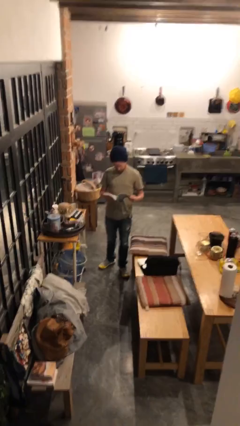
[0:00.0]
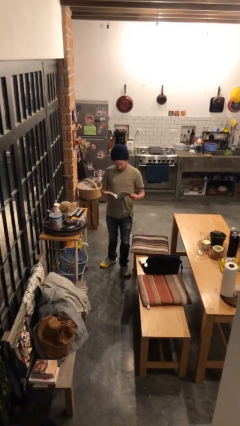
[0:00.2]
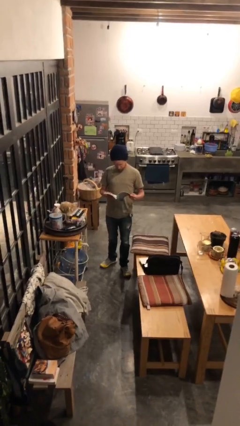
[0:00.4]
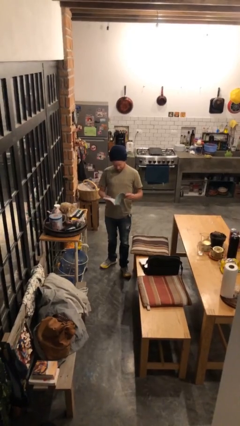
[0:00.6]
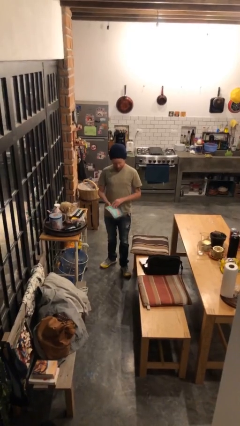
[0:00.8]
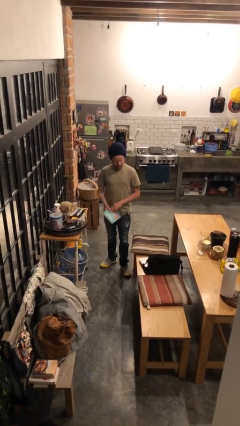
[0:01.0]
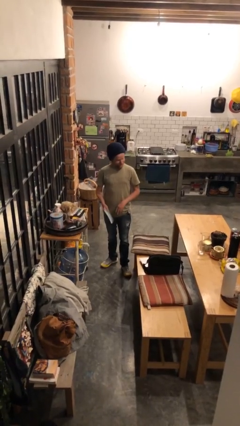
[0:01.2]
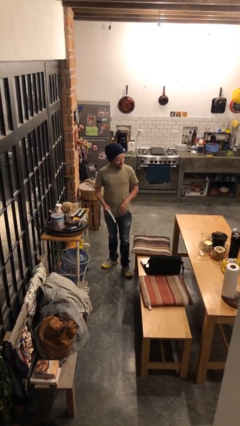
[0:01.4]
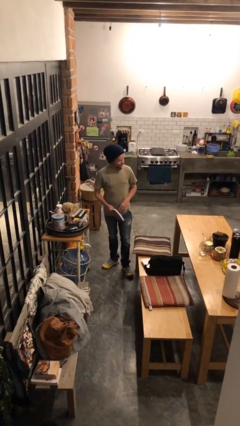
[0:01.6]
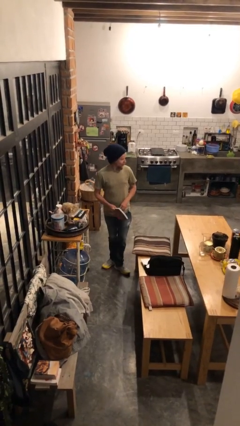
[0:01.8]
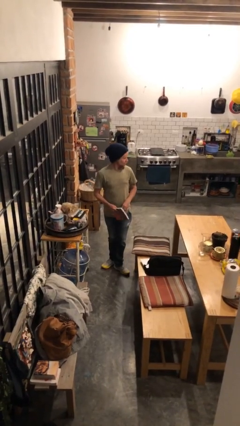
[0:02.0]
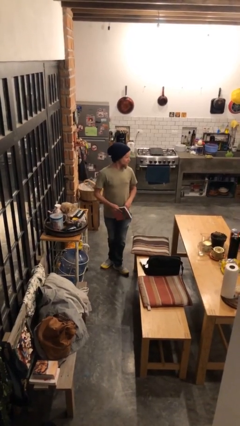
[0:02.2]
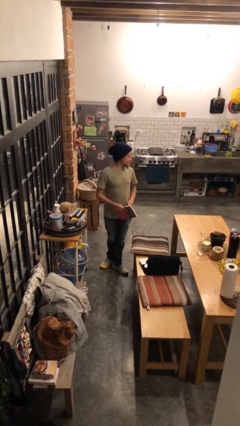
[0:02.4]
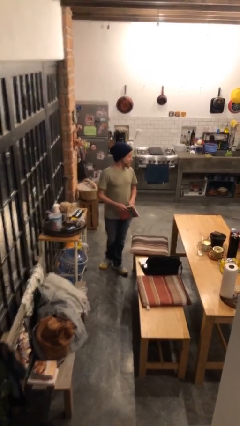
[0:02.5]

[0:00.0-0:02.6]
person reads document

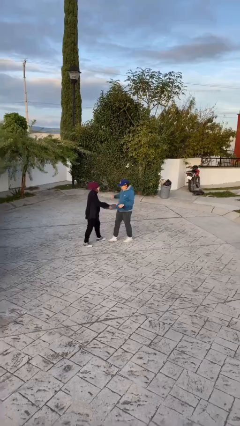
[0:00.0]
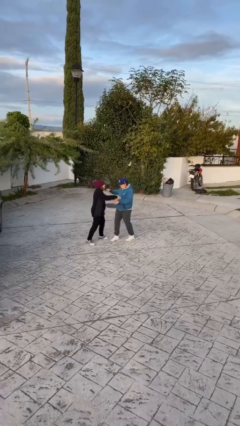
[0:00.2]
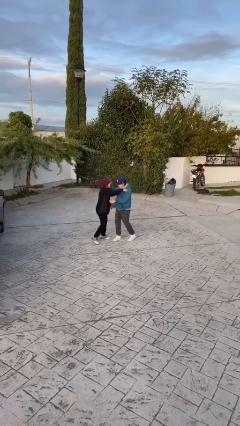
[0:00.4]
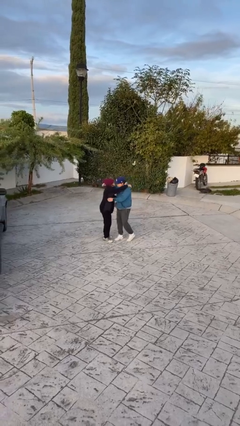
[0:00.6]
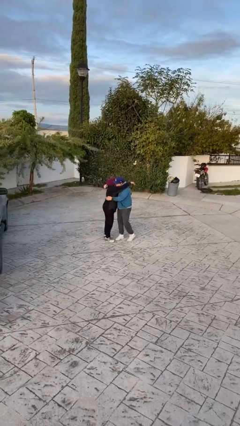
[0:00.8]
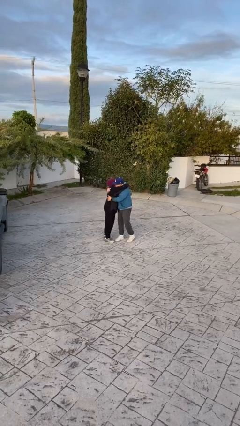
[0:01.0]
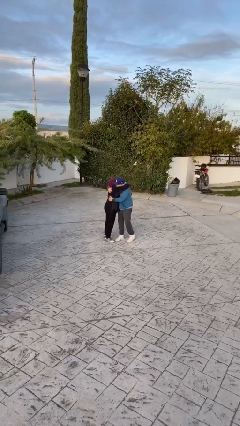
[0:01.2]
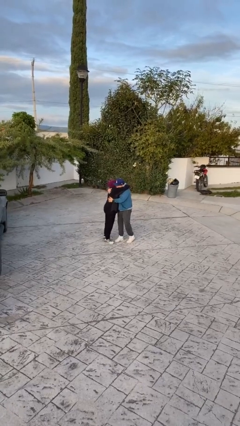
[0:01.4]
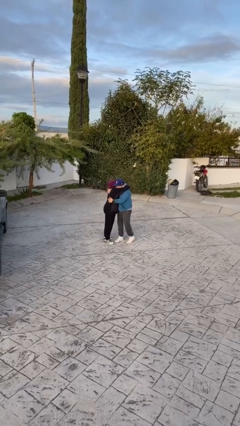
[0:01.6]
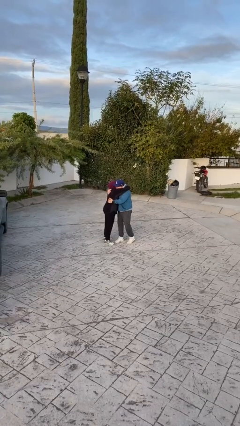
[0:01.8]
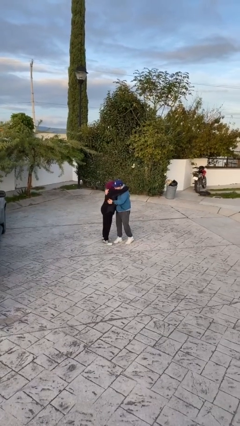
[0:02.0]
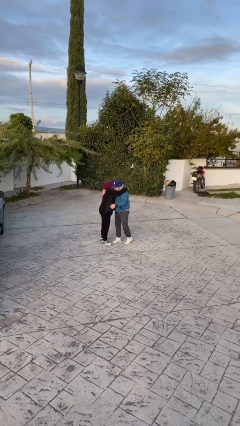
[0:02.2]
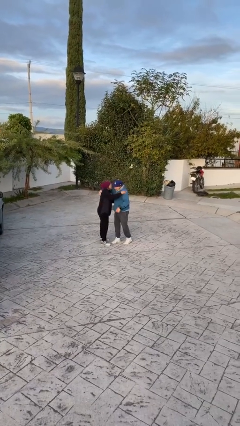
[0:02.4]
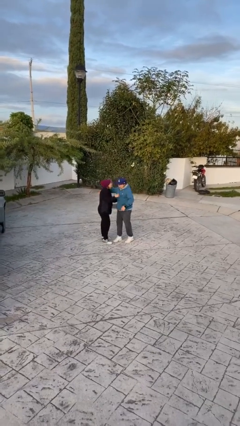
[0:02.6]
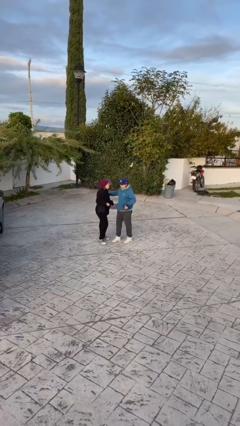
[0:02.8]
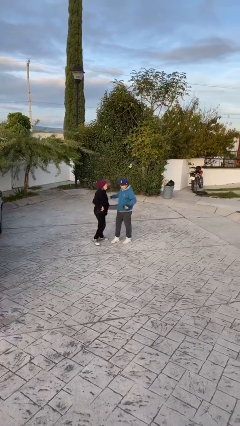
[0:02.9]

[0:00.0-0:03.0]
person embraces person

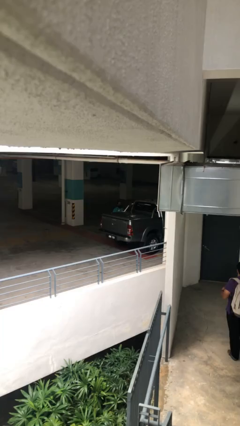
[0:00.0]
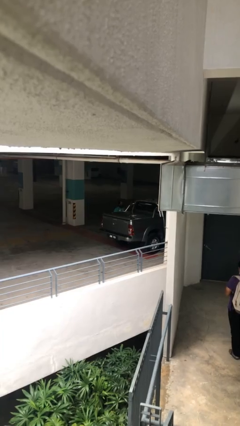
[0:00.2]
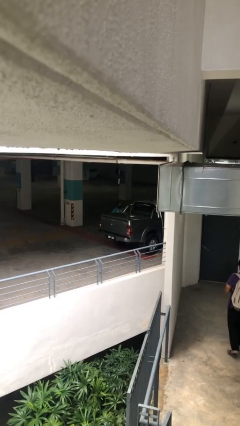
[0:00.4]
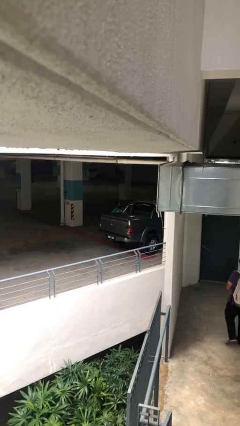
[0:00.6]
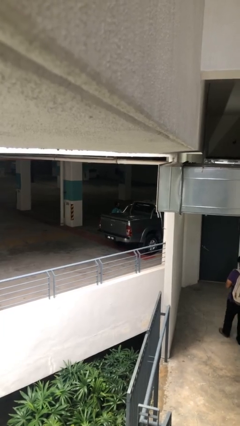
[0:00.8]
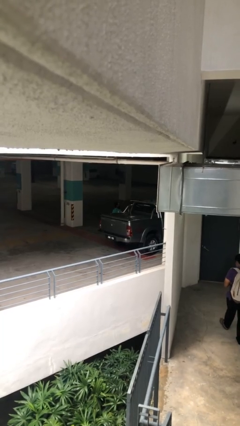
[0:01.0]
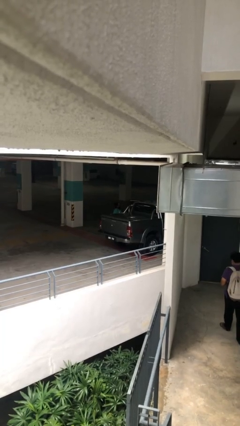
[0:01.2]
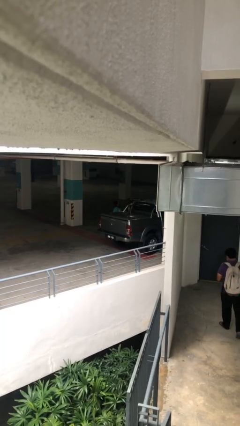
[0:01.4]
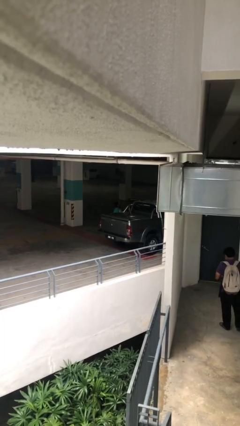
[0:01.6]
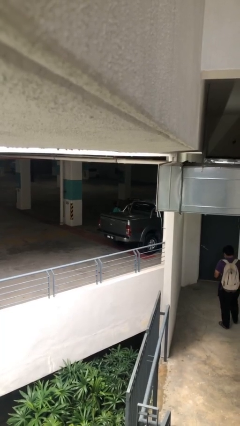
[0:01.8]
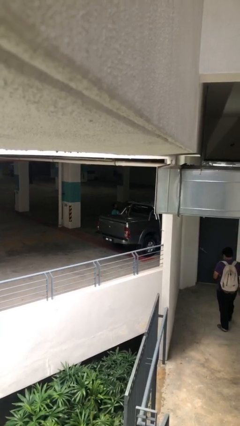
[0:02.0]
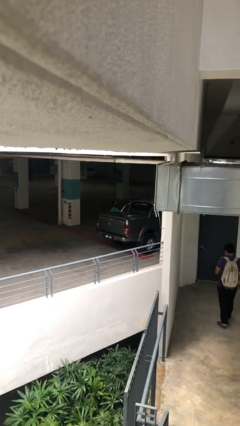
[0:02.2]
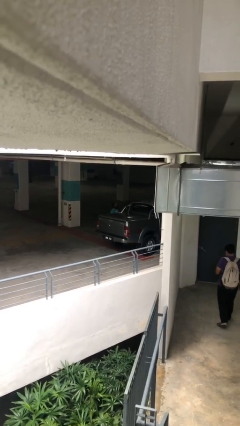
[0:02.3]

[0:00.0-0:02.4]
person opens car door

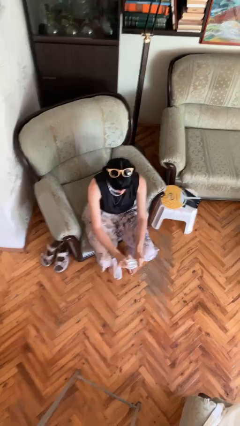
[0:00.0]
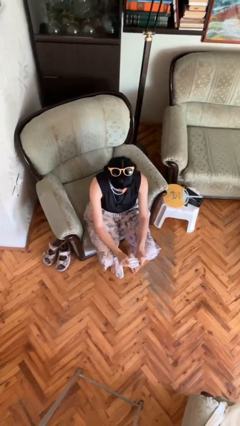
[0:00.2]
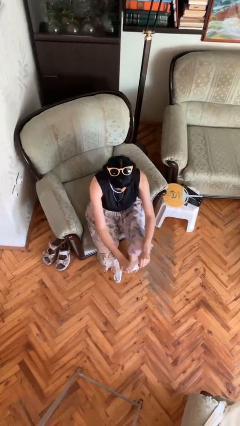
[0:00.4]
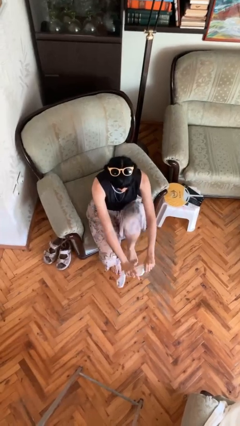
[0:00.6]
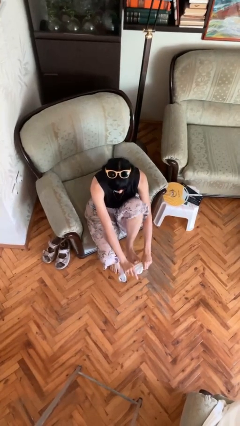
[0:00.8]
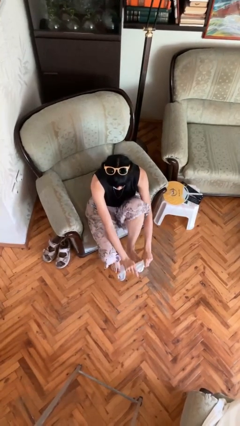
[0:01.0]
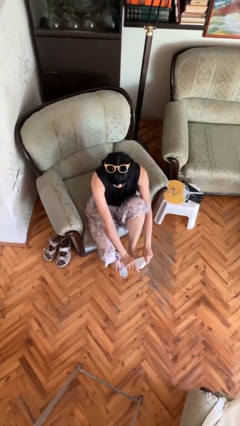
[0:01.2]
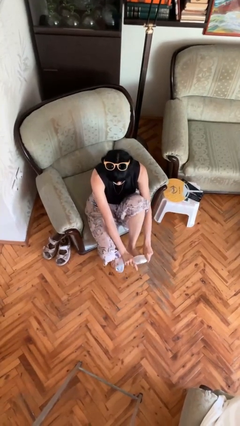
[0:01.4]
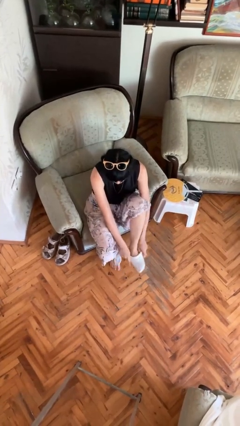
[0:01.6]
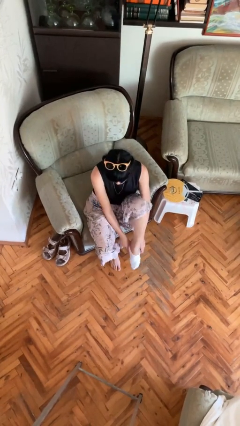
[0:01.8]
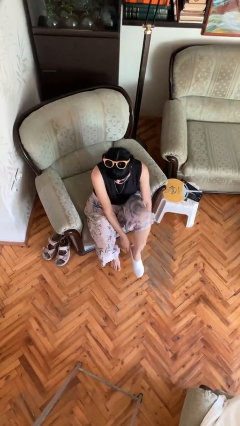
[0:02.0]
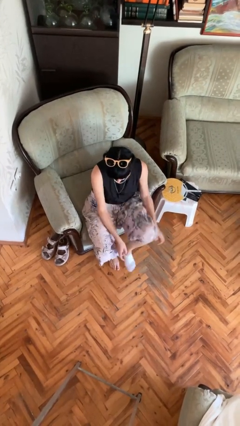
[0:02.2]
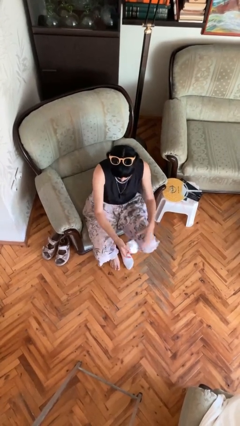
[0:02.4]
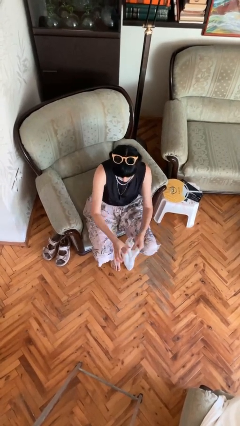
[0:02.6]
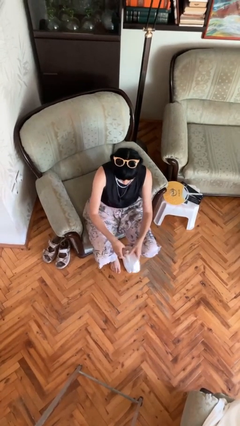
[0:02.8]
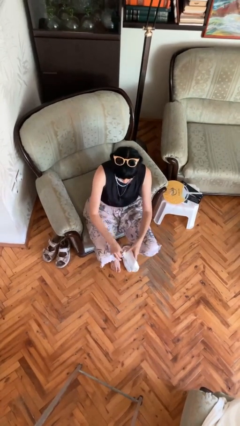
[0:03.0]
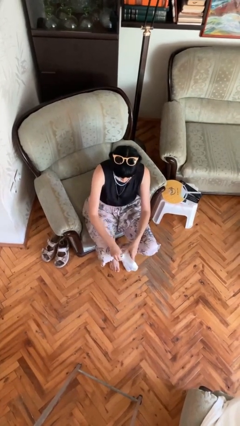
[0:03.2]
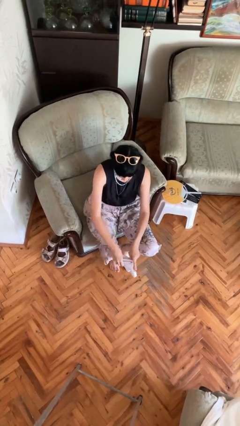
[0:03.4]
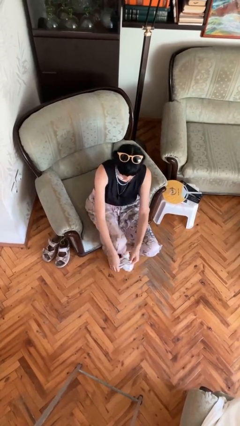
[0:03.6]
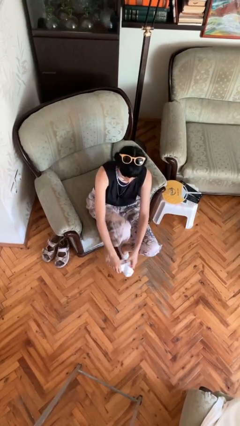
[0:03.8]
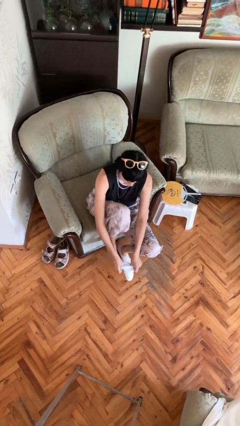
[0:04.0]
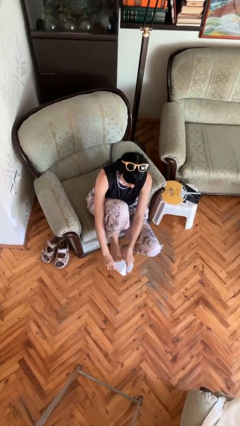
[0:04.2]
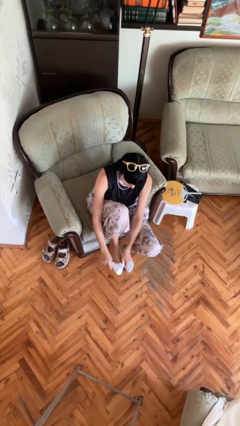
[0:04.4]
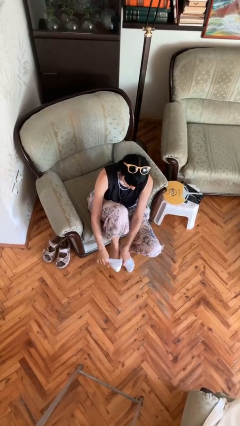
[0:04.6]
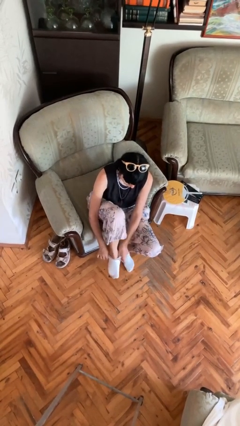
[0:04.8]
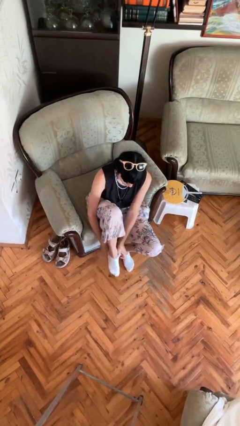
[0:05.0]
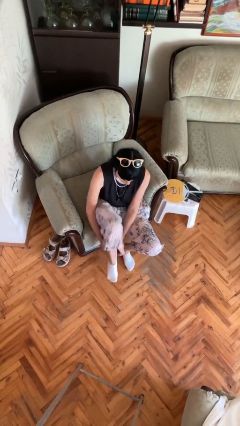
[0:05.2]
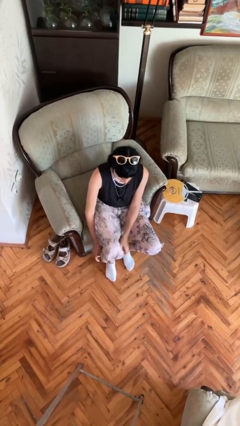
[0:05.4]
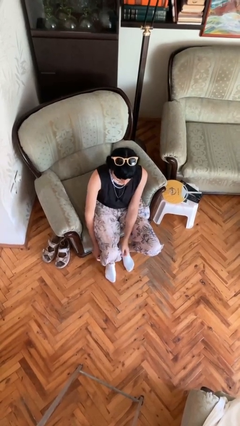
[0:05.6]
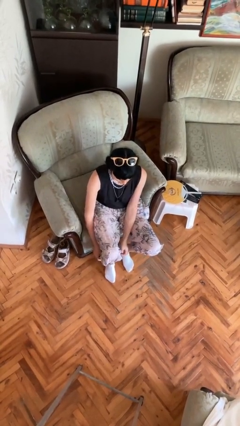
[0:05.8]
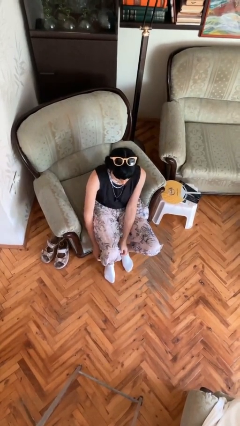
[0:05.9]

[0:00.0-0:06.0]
person puts on socks

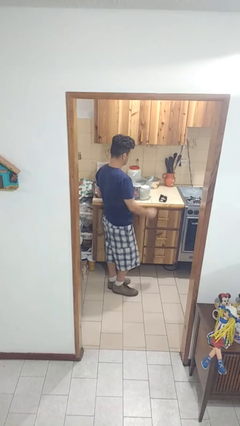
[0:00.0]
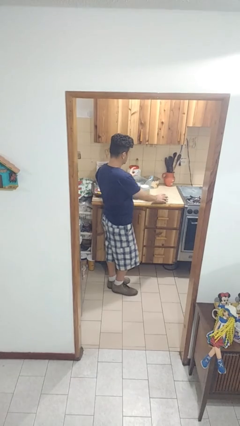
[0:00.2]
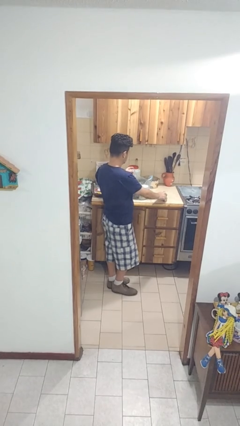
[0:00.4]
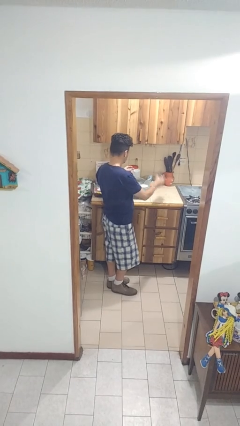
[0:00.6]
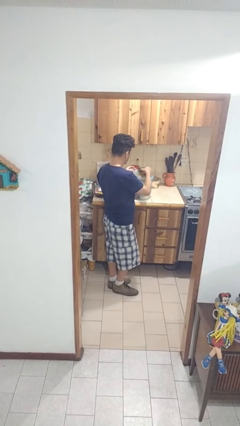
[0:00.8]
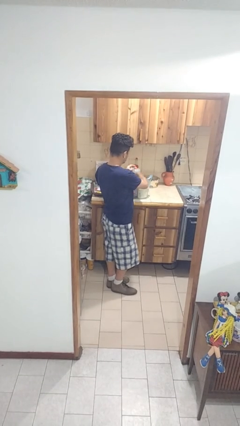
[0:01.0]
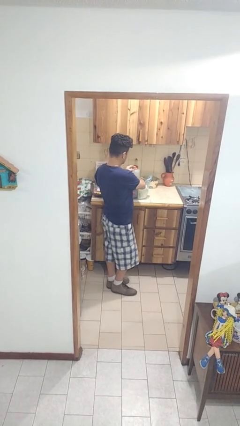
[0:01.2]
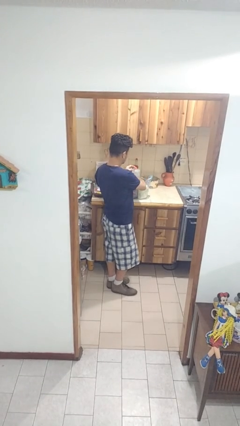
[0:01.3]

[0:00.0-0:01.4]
person puts object into bag

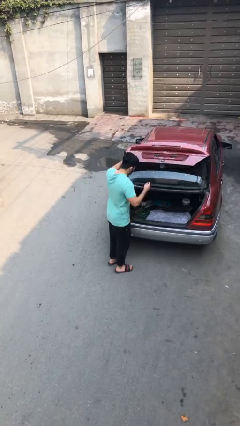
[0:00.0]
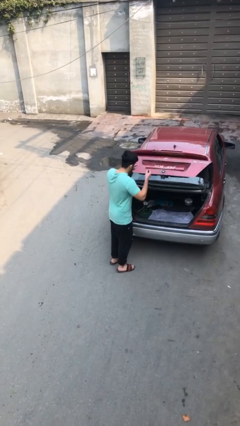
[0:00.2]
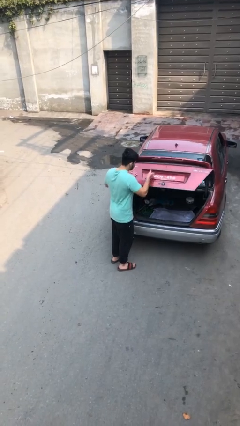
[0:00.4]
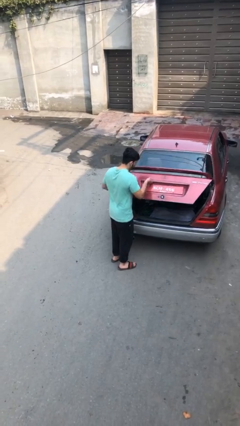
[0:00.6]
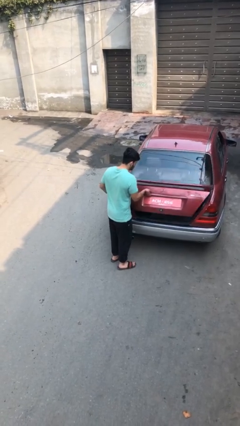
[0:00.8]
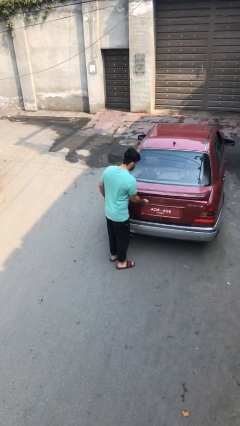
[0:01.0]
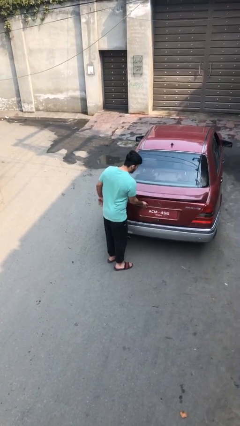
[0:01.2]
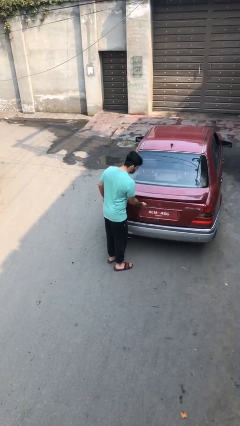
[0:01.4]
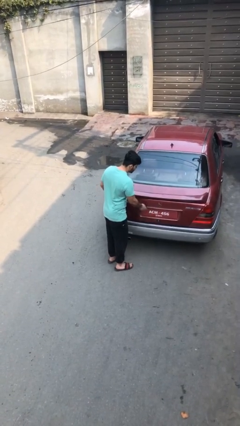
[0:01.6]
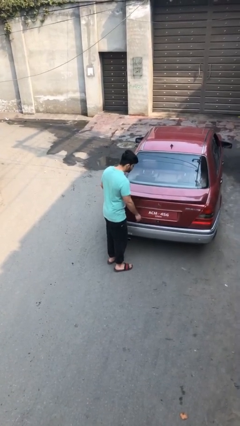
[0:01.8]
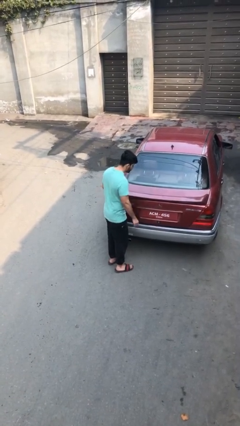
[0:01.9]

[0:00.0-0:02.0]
person closes car trunk

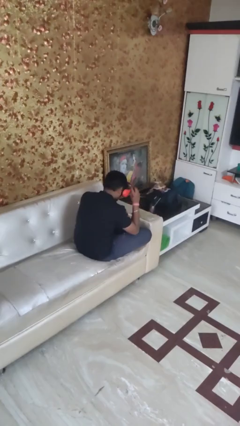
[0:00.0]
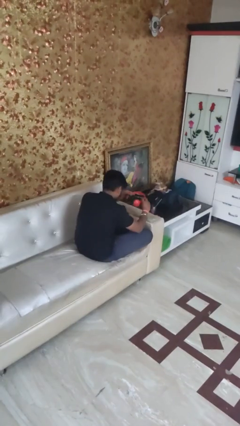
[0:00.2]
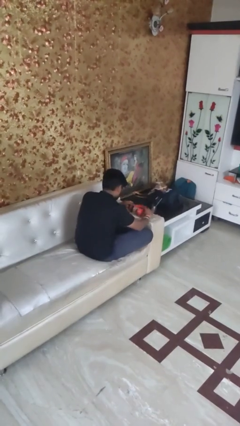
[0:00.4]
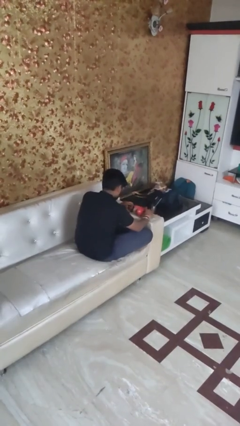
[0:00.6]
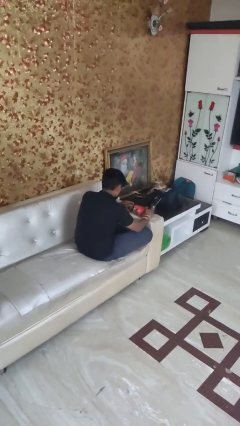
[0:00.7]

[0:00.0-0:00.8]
person takes off headphones
